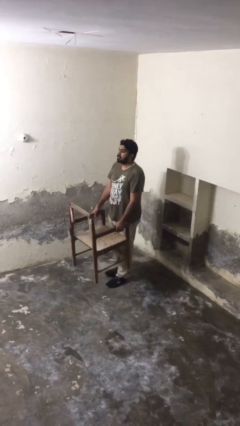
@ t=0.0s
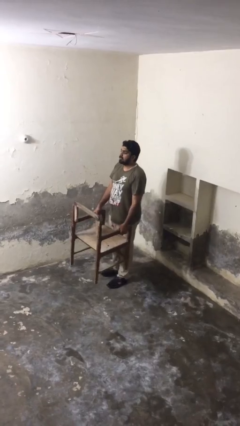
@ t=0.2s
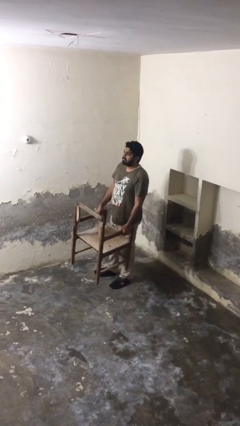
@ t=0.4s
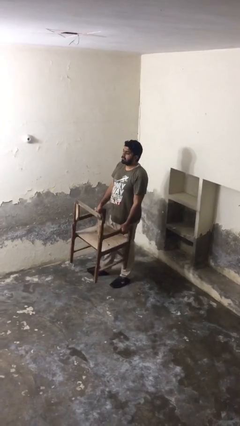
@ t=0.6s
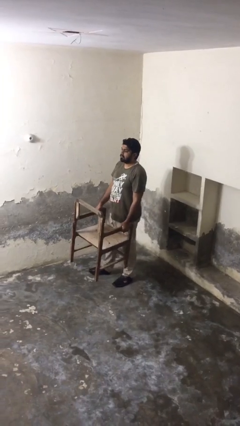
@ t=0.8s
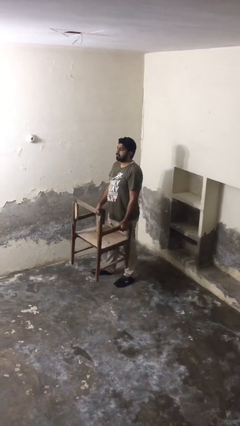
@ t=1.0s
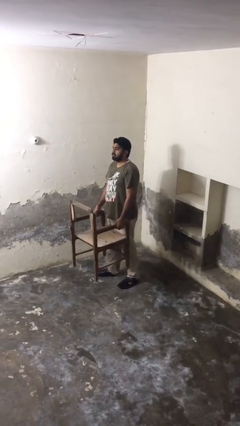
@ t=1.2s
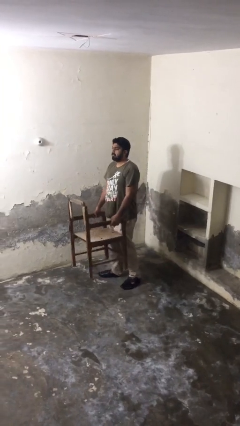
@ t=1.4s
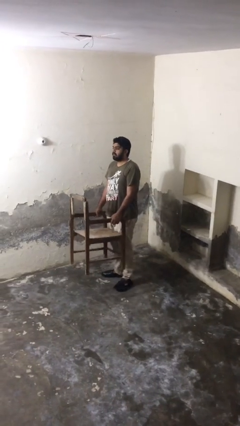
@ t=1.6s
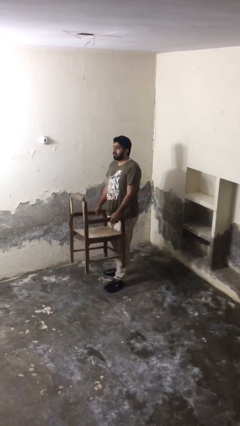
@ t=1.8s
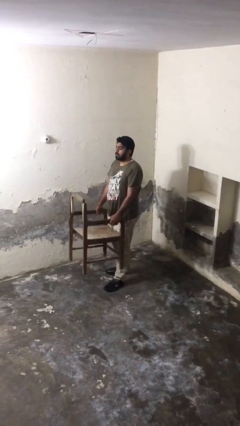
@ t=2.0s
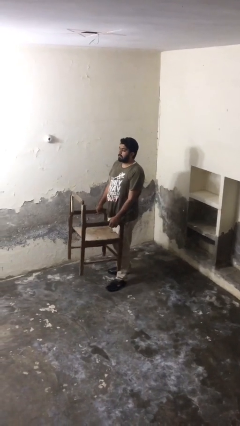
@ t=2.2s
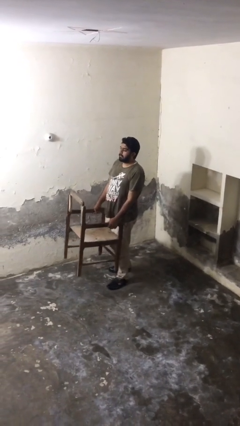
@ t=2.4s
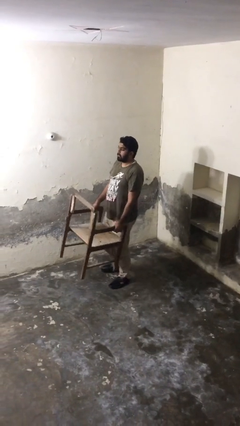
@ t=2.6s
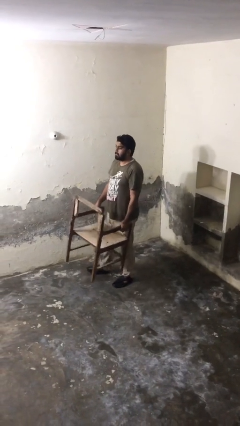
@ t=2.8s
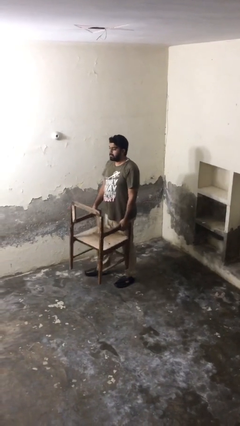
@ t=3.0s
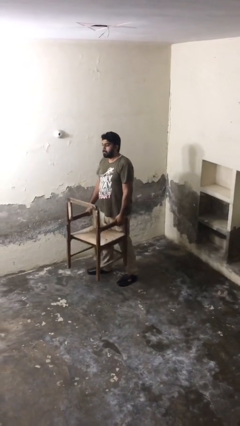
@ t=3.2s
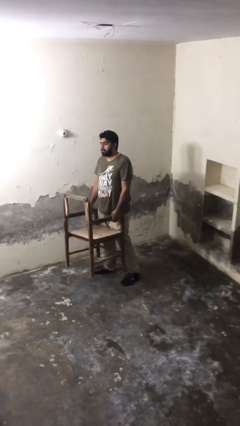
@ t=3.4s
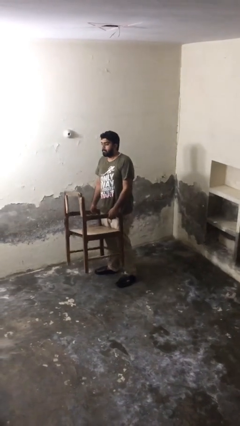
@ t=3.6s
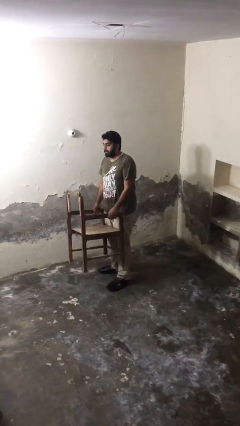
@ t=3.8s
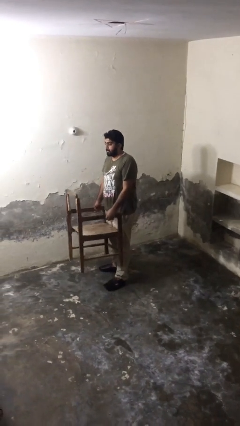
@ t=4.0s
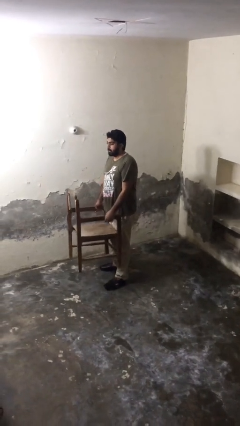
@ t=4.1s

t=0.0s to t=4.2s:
person carries heavy object

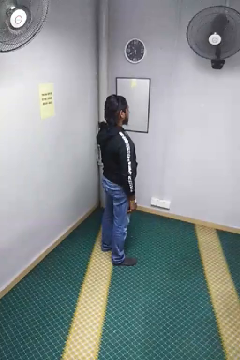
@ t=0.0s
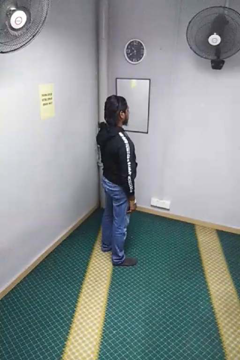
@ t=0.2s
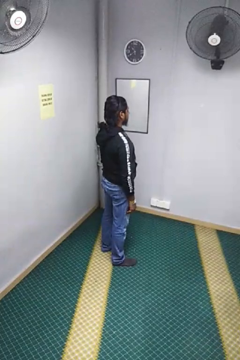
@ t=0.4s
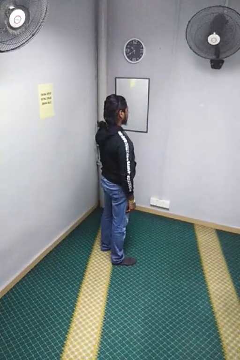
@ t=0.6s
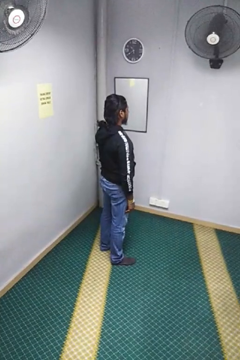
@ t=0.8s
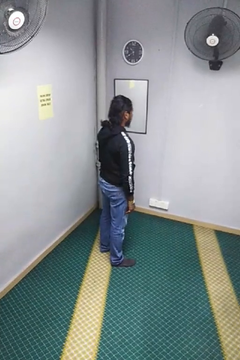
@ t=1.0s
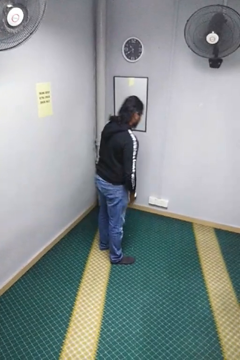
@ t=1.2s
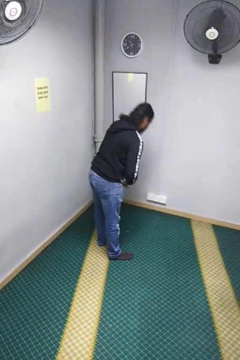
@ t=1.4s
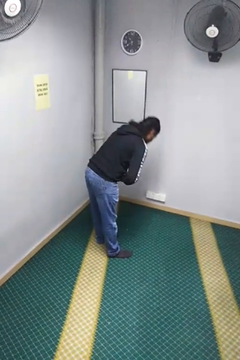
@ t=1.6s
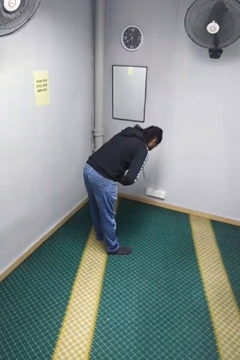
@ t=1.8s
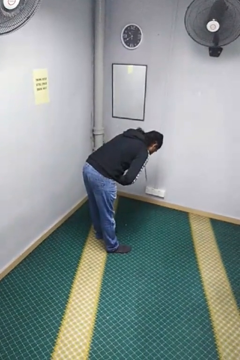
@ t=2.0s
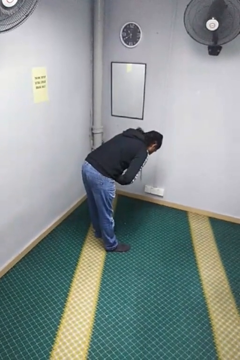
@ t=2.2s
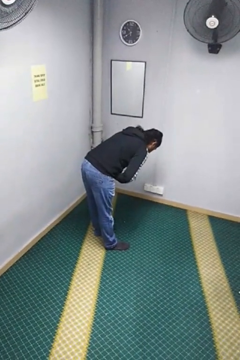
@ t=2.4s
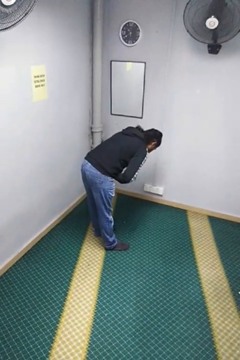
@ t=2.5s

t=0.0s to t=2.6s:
person bows

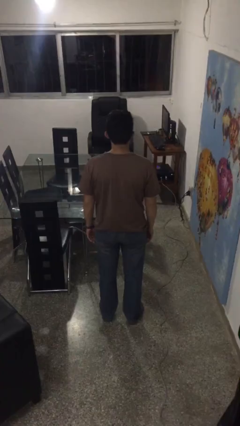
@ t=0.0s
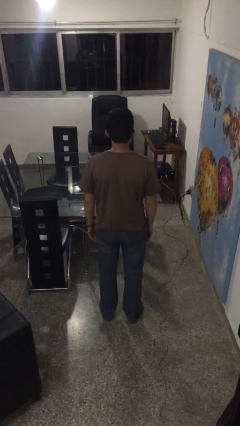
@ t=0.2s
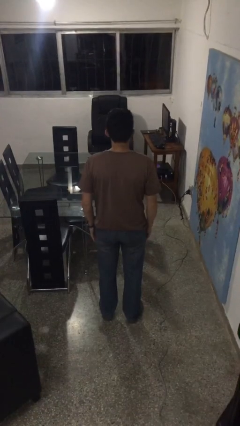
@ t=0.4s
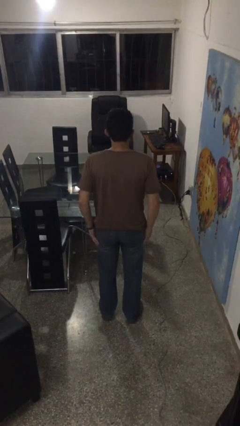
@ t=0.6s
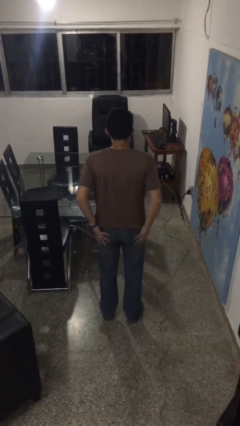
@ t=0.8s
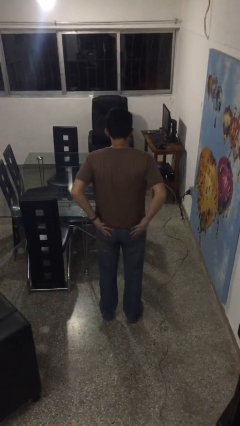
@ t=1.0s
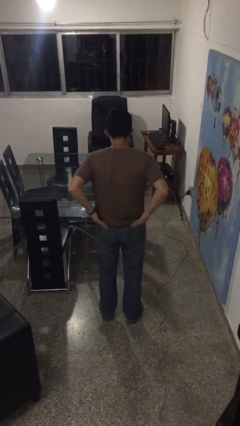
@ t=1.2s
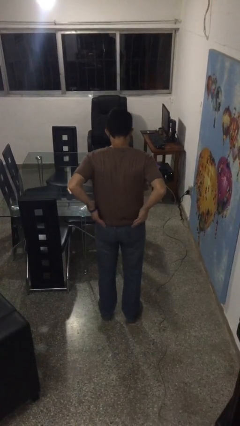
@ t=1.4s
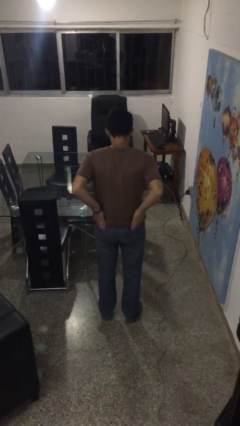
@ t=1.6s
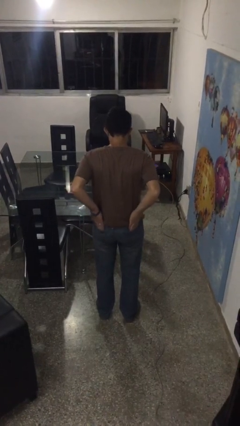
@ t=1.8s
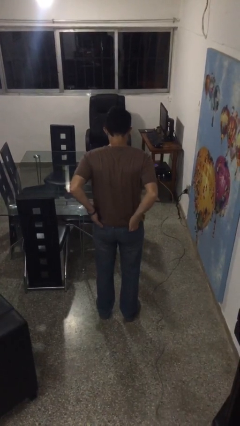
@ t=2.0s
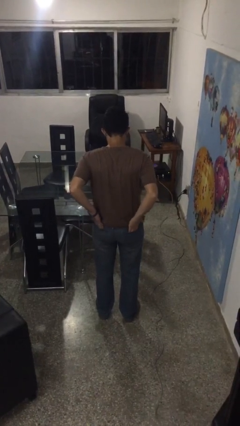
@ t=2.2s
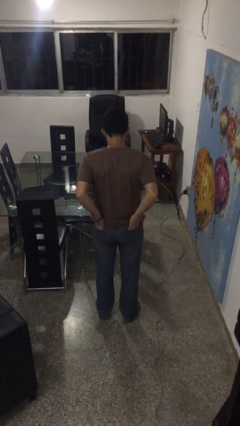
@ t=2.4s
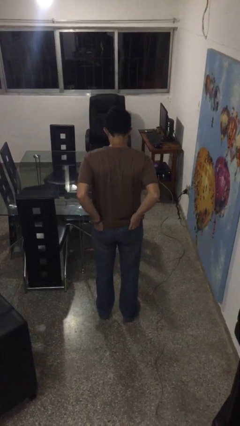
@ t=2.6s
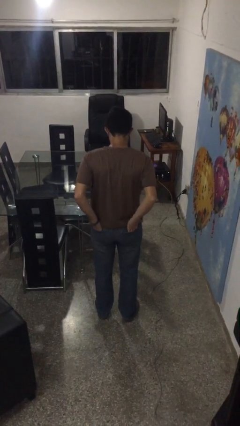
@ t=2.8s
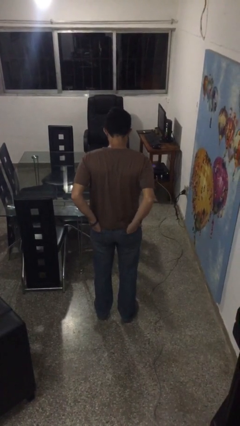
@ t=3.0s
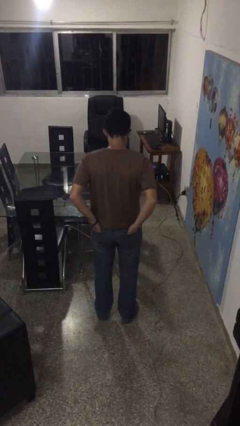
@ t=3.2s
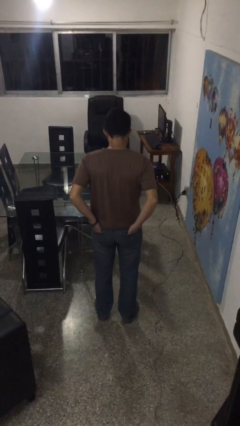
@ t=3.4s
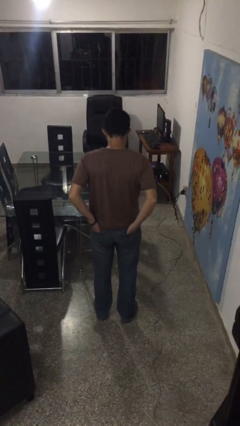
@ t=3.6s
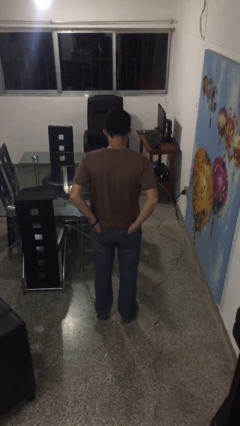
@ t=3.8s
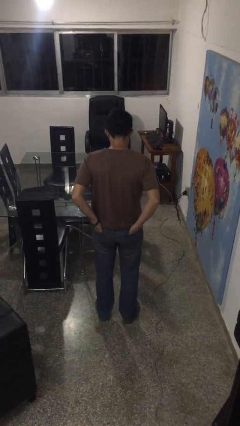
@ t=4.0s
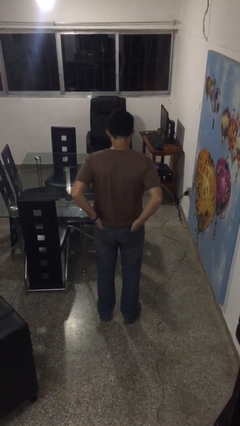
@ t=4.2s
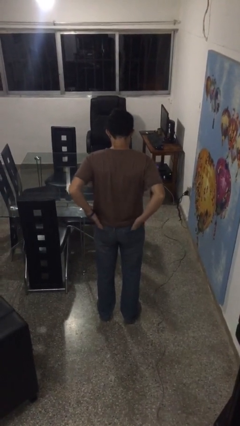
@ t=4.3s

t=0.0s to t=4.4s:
person puts hands in back pockets

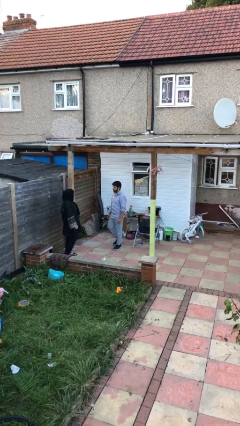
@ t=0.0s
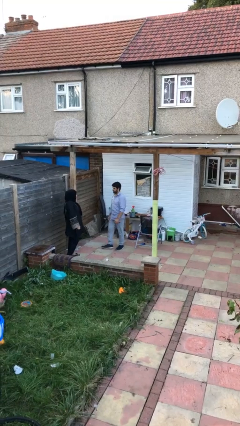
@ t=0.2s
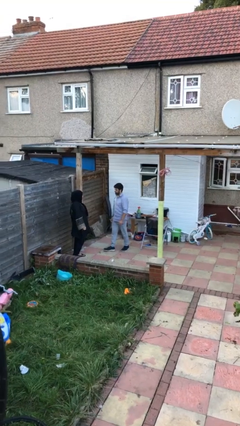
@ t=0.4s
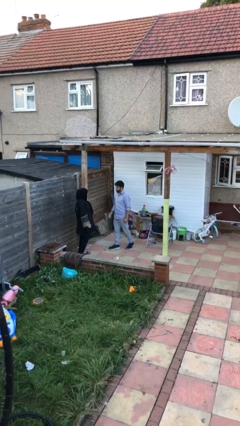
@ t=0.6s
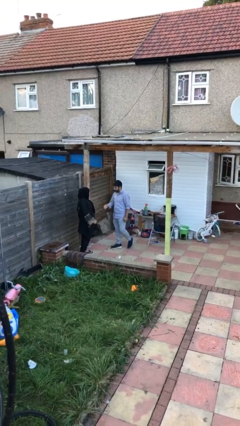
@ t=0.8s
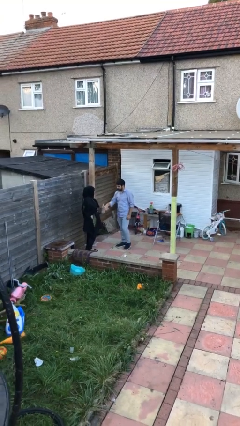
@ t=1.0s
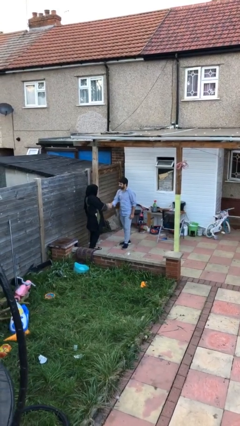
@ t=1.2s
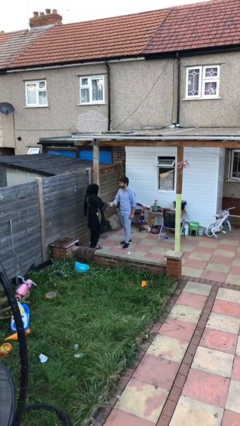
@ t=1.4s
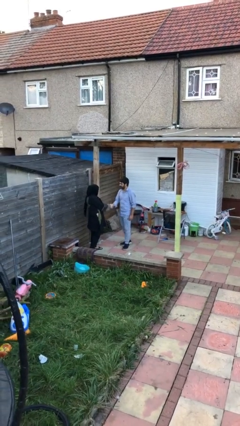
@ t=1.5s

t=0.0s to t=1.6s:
person shakes hand

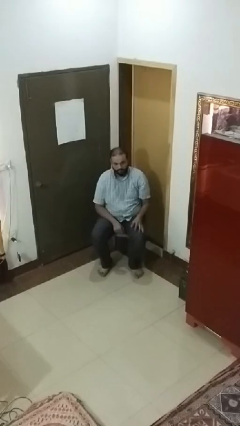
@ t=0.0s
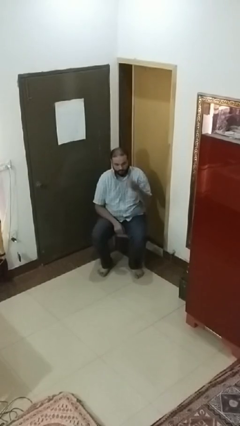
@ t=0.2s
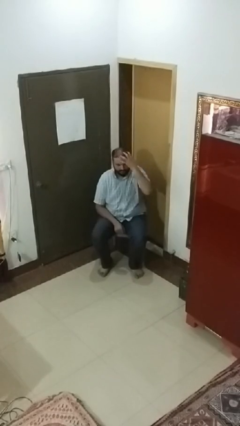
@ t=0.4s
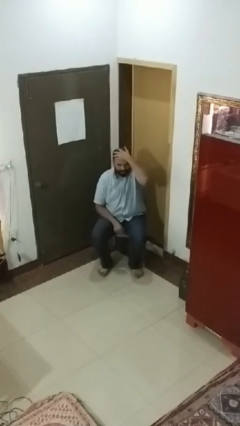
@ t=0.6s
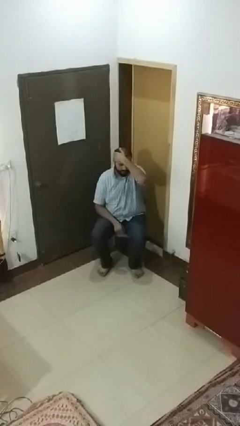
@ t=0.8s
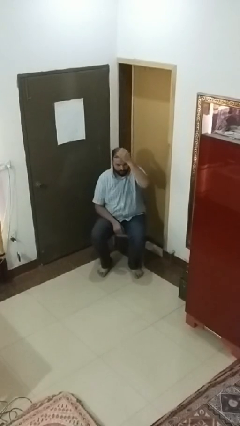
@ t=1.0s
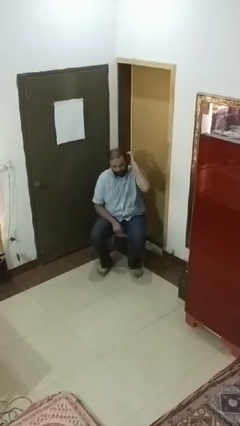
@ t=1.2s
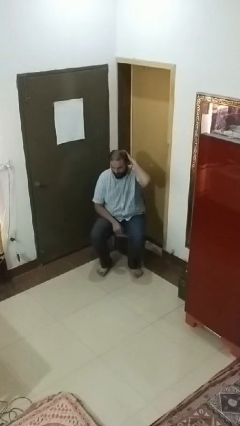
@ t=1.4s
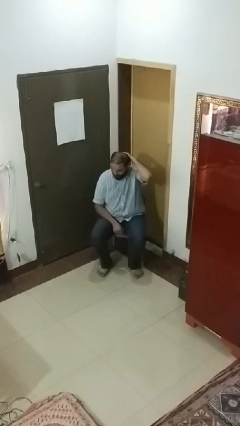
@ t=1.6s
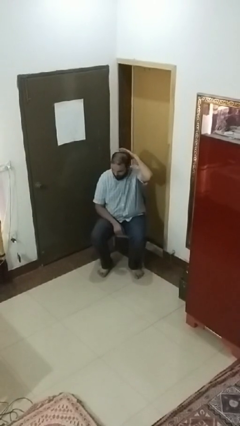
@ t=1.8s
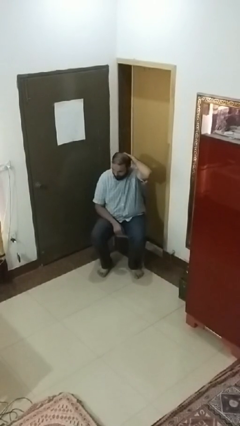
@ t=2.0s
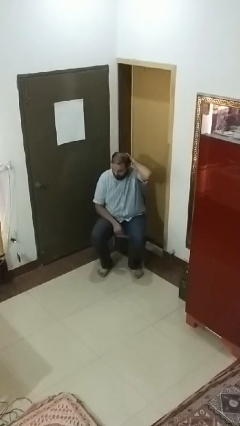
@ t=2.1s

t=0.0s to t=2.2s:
person strokes hair

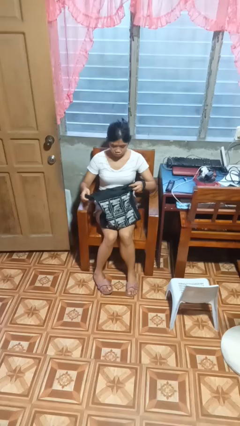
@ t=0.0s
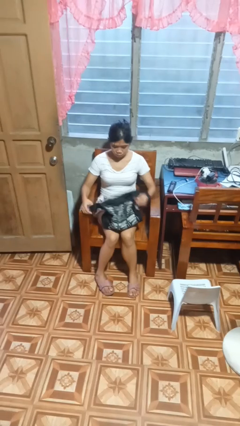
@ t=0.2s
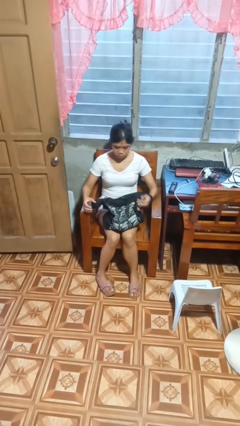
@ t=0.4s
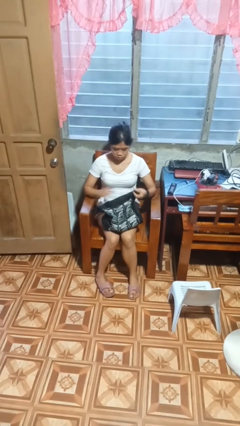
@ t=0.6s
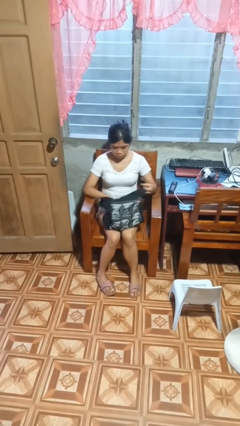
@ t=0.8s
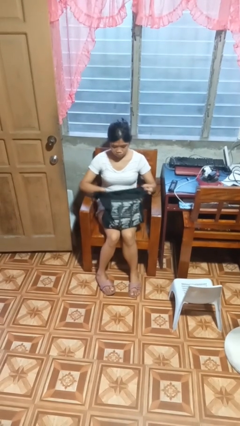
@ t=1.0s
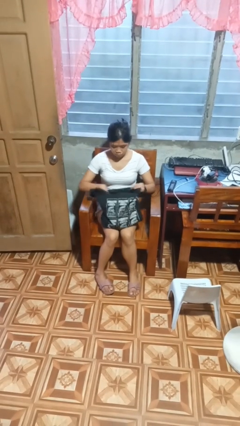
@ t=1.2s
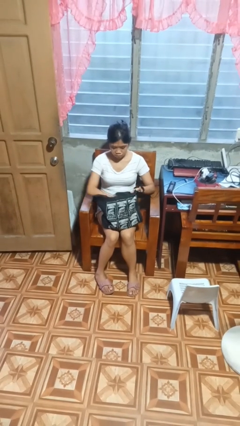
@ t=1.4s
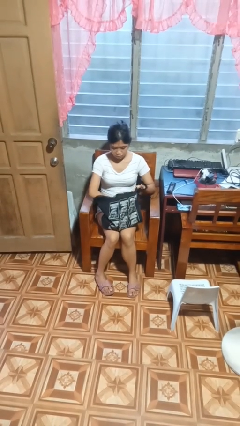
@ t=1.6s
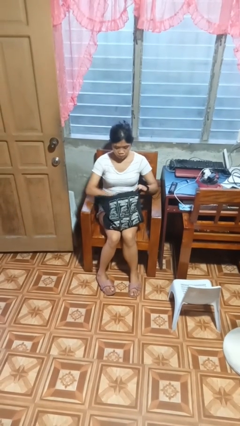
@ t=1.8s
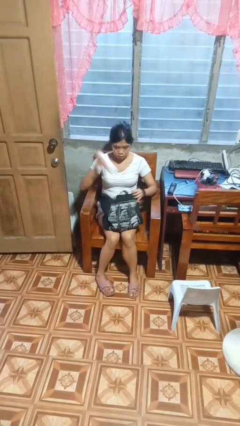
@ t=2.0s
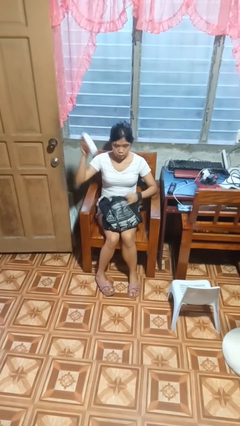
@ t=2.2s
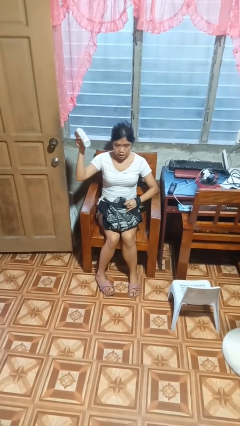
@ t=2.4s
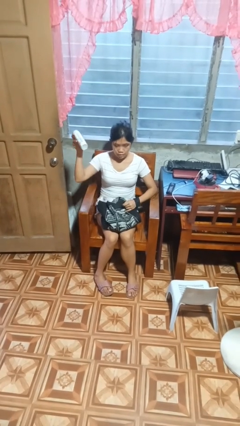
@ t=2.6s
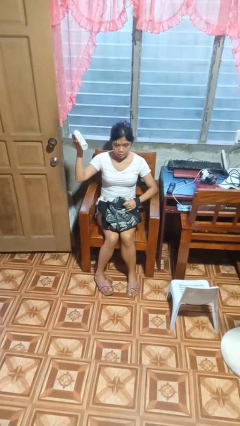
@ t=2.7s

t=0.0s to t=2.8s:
person searches in bag
